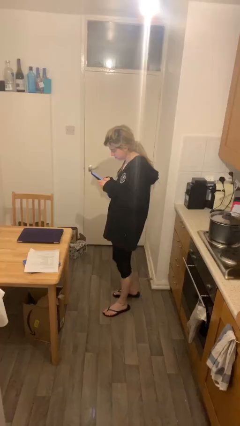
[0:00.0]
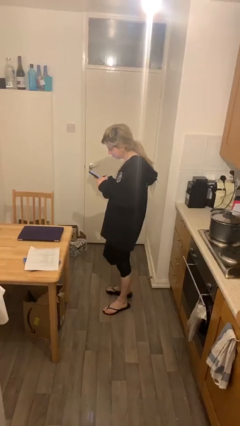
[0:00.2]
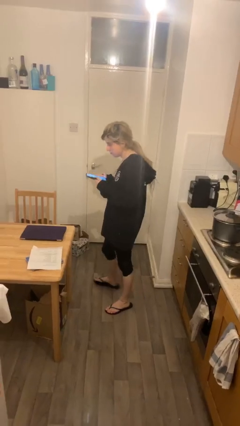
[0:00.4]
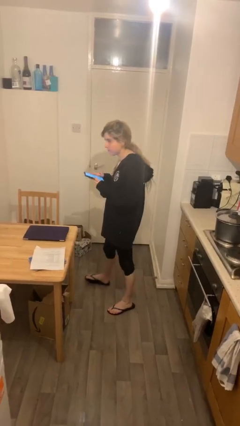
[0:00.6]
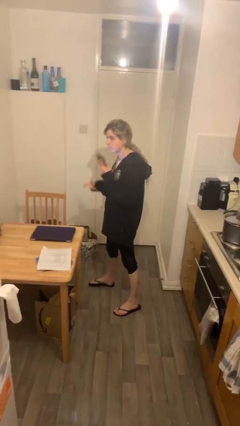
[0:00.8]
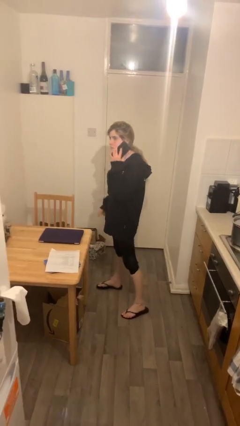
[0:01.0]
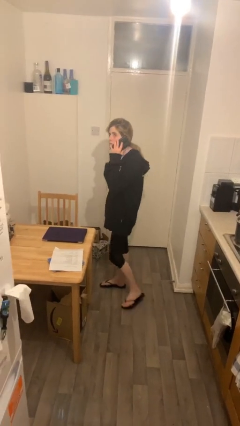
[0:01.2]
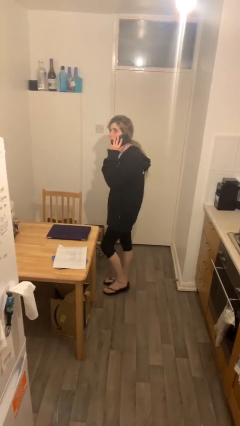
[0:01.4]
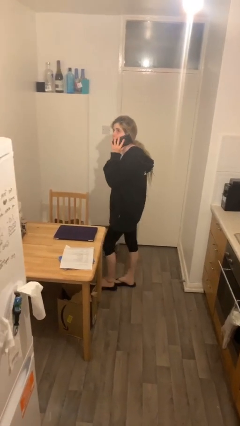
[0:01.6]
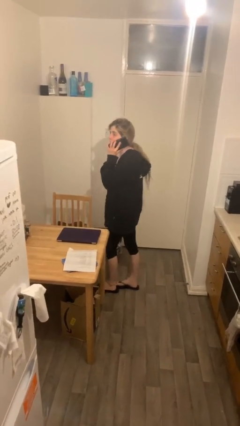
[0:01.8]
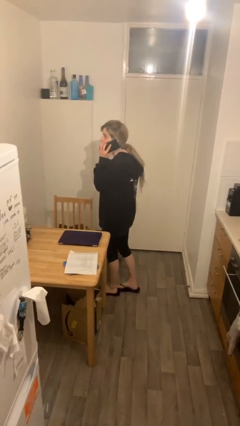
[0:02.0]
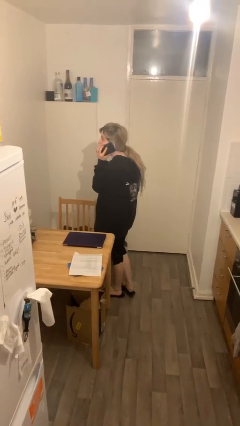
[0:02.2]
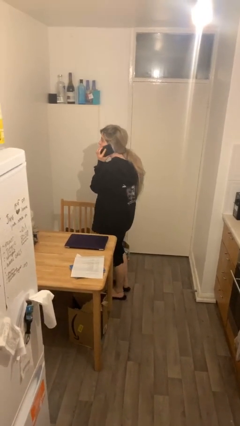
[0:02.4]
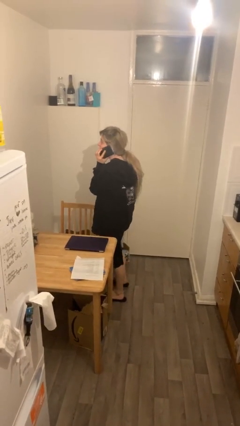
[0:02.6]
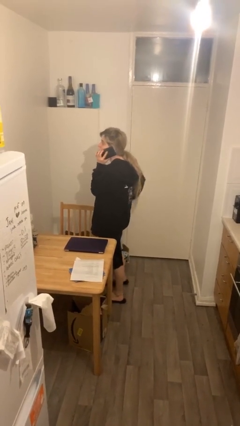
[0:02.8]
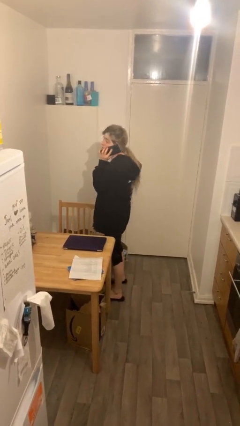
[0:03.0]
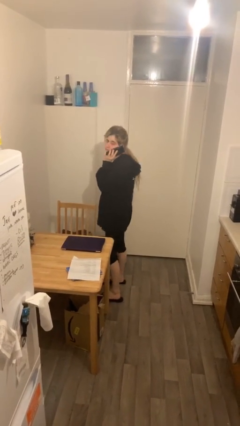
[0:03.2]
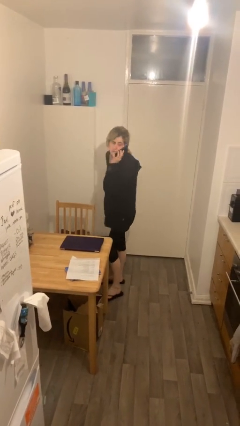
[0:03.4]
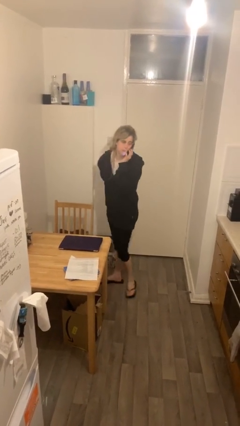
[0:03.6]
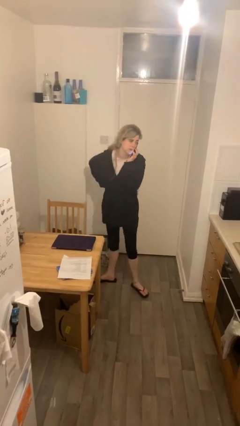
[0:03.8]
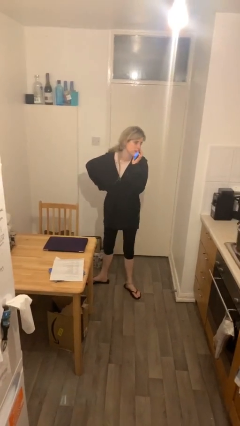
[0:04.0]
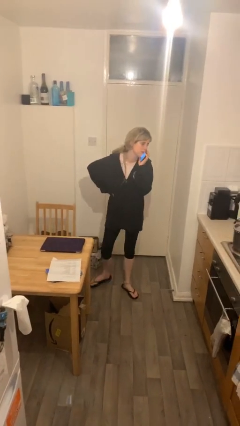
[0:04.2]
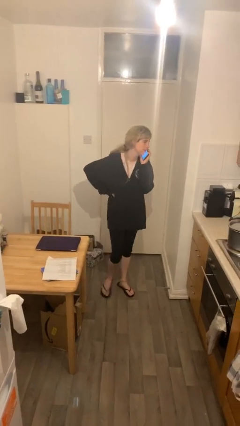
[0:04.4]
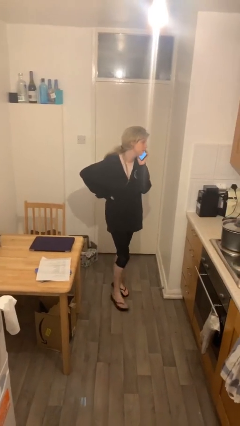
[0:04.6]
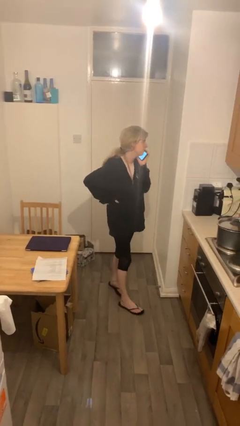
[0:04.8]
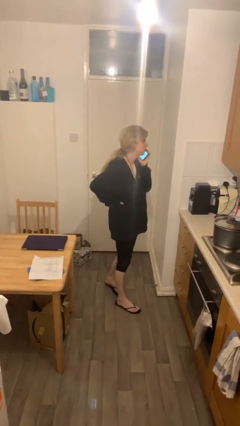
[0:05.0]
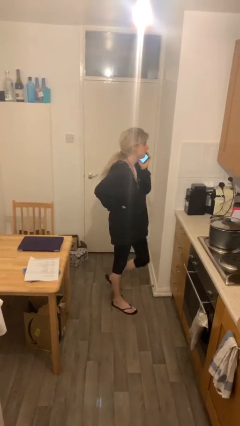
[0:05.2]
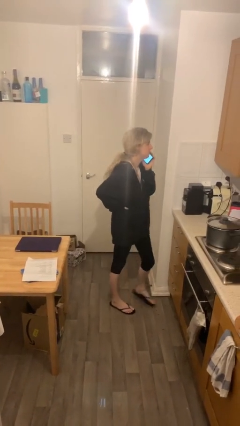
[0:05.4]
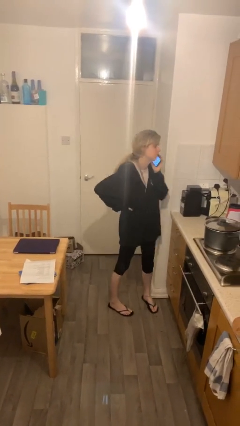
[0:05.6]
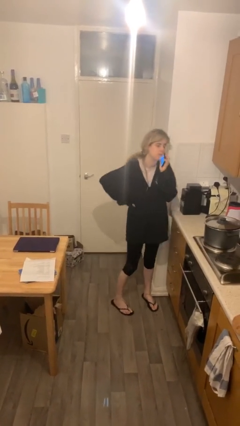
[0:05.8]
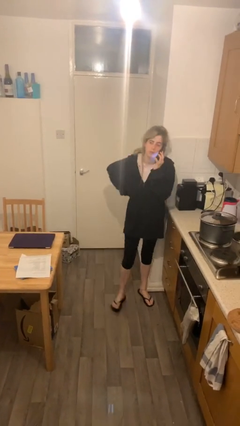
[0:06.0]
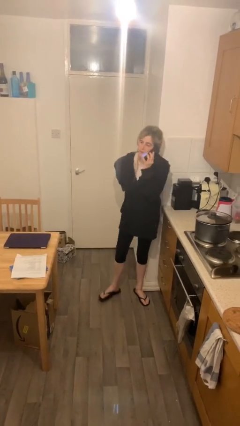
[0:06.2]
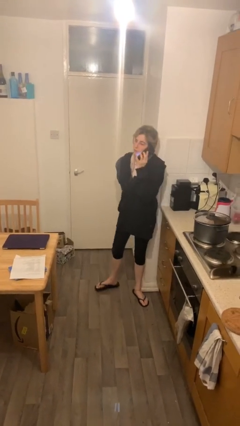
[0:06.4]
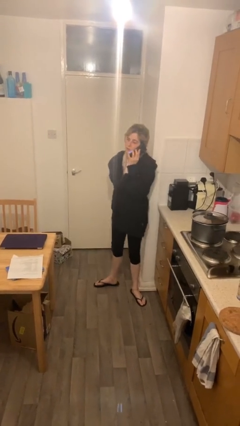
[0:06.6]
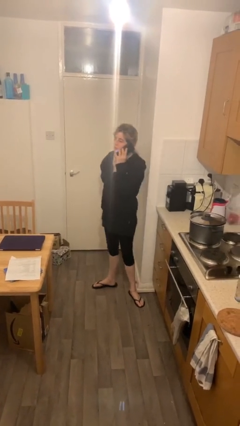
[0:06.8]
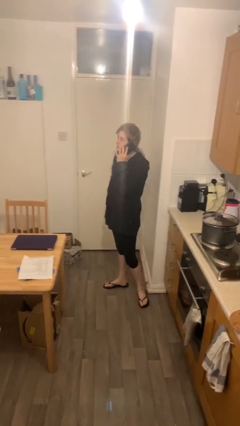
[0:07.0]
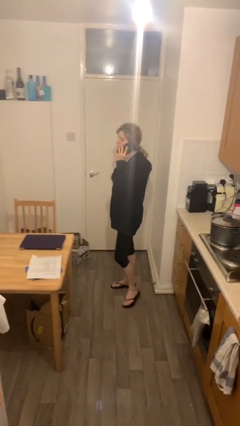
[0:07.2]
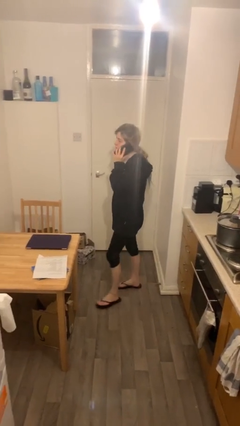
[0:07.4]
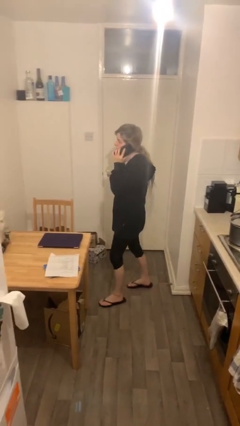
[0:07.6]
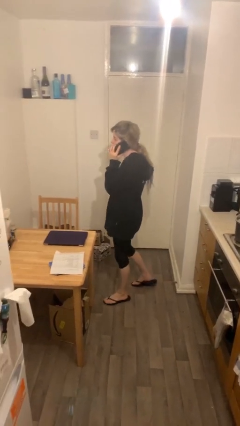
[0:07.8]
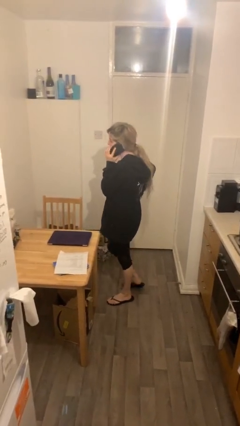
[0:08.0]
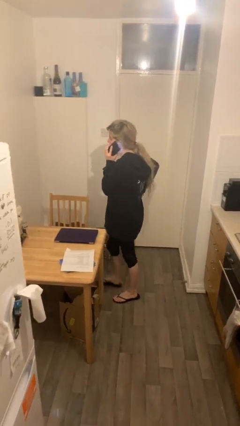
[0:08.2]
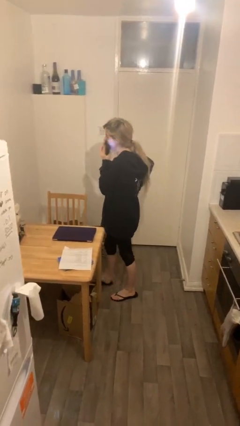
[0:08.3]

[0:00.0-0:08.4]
person talks on phone

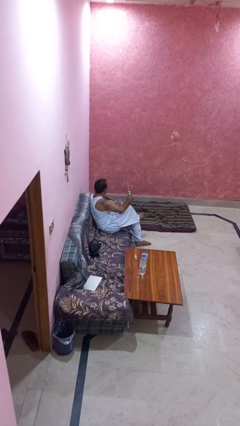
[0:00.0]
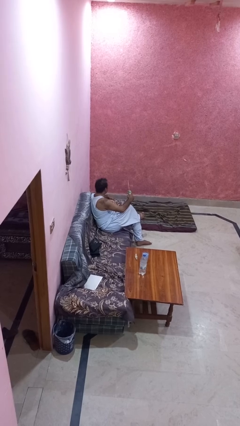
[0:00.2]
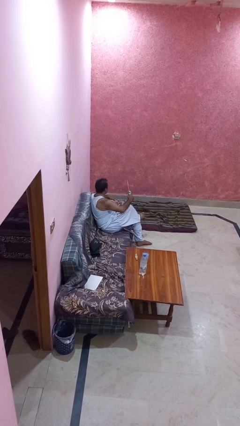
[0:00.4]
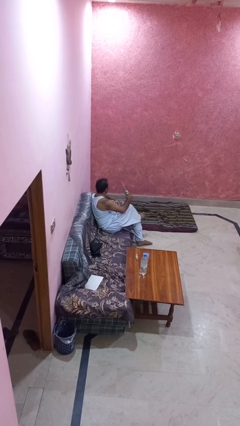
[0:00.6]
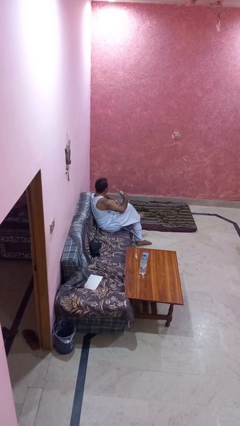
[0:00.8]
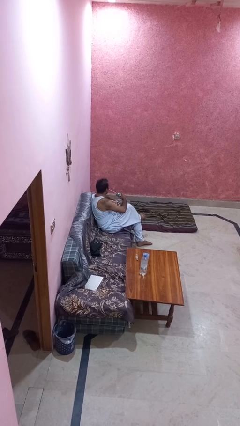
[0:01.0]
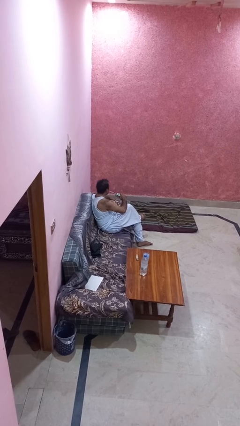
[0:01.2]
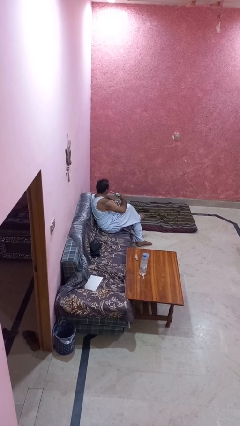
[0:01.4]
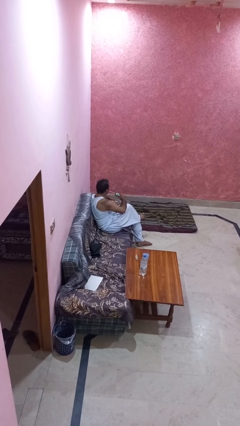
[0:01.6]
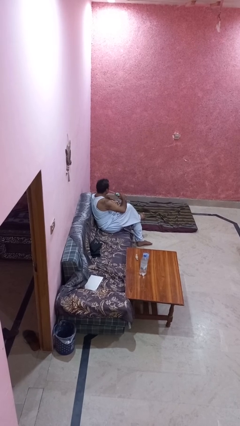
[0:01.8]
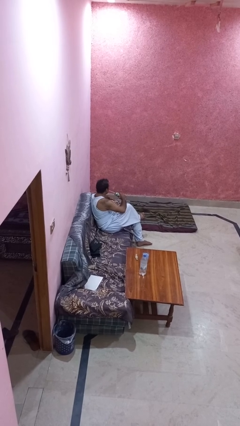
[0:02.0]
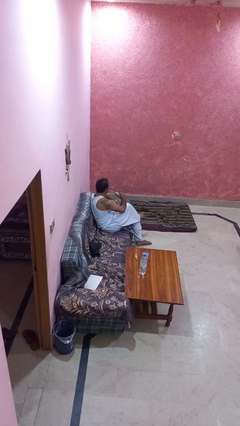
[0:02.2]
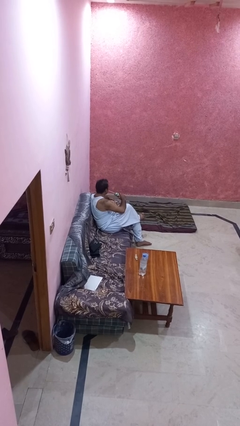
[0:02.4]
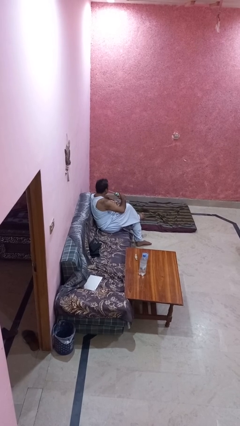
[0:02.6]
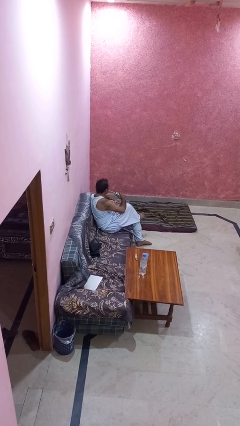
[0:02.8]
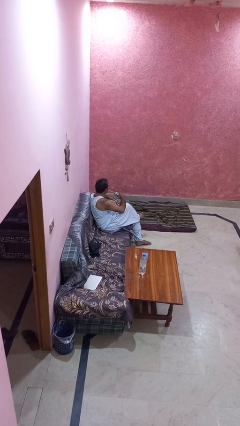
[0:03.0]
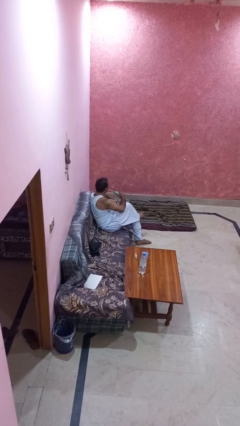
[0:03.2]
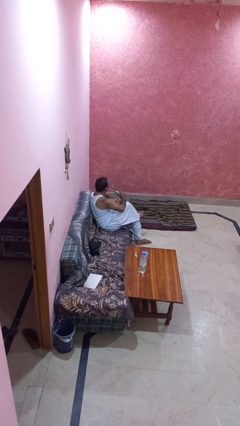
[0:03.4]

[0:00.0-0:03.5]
person drinks from straw

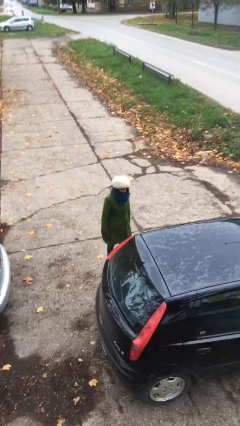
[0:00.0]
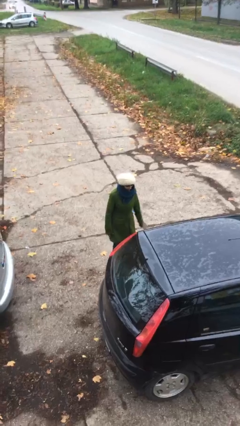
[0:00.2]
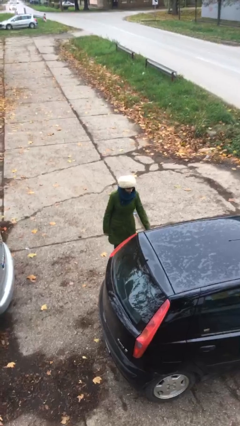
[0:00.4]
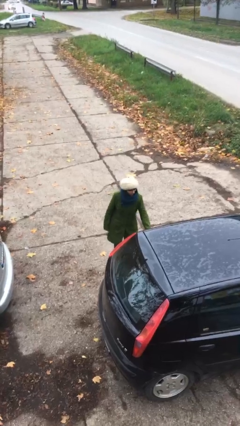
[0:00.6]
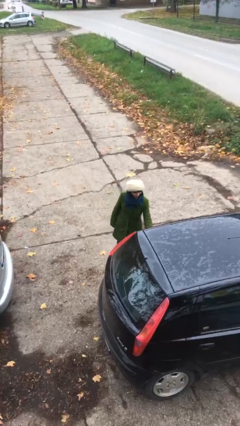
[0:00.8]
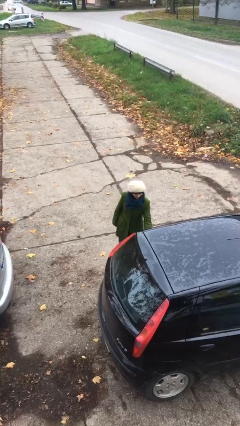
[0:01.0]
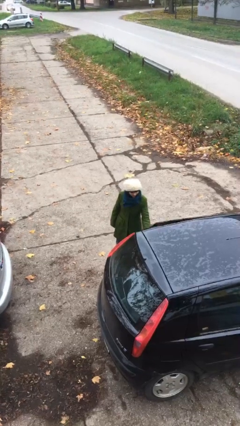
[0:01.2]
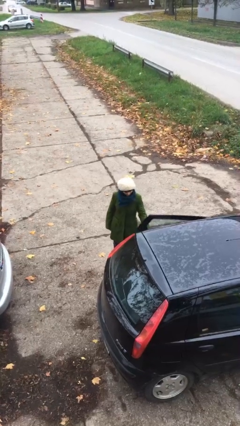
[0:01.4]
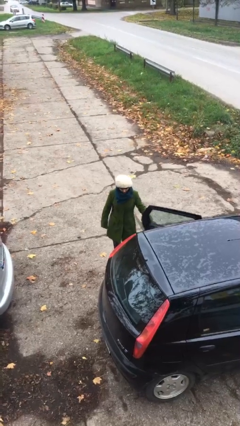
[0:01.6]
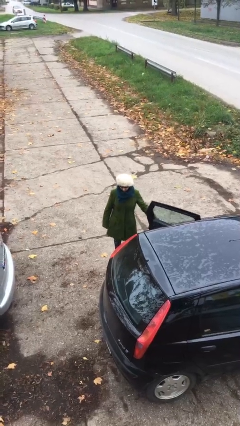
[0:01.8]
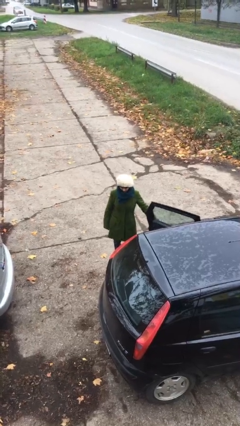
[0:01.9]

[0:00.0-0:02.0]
person opens car door

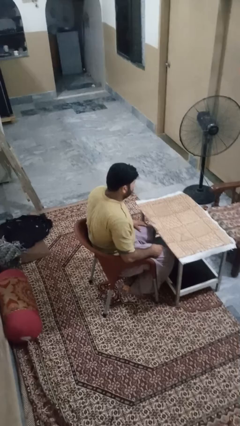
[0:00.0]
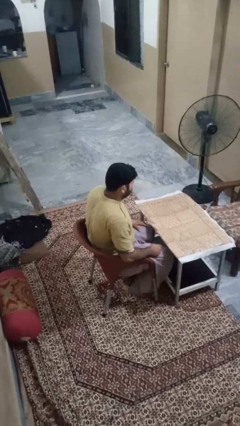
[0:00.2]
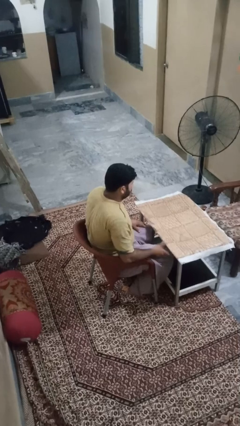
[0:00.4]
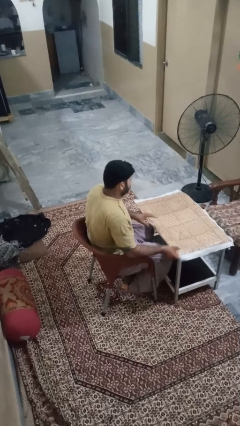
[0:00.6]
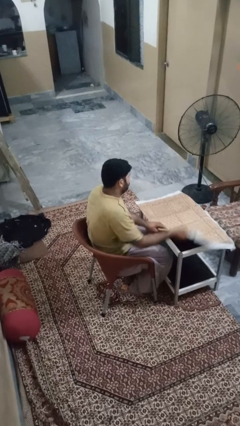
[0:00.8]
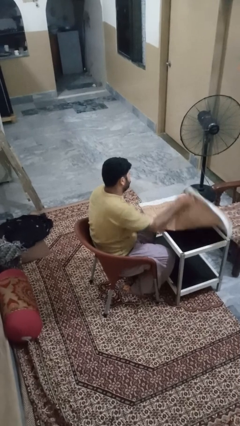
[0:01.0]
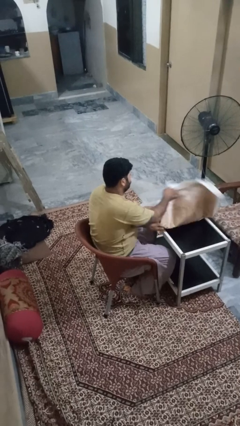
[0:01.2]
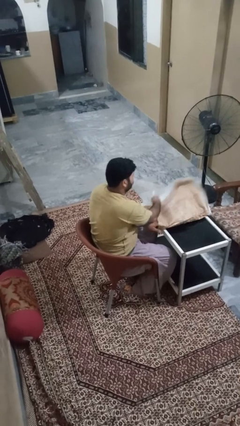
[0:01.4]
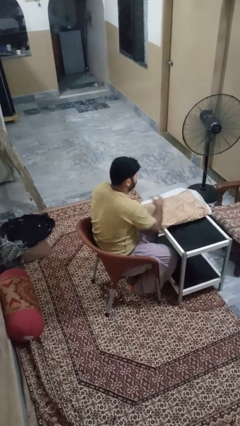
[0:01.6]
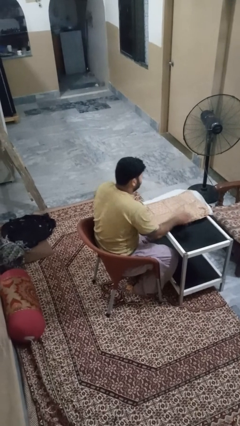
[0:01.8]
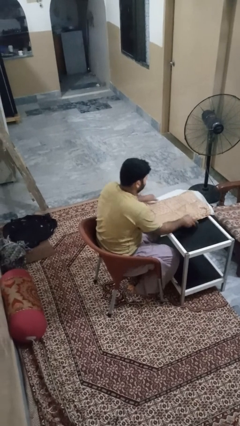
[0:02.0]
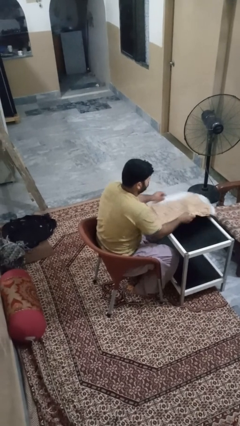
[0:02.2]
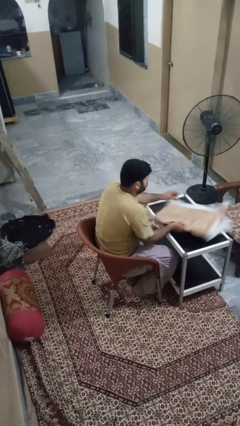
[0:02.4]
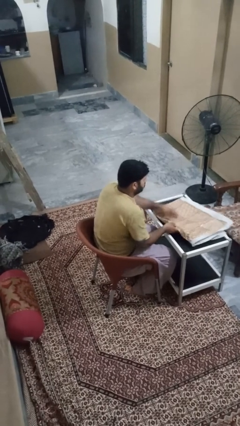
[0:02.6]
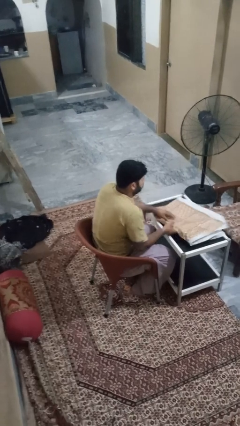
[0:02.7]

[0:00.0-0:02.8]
person folds tablecloth

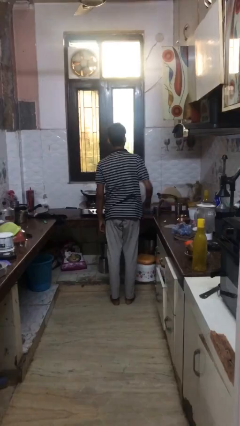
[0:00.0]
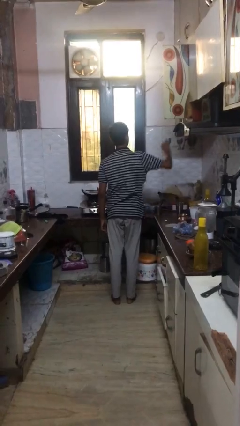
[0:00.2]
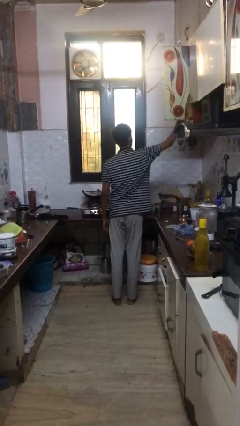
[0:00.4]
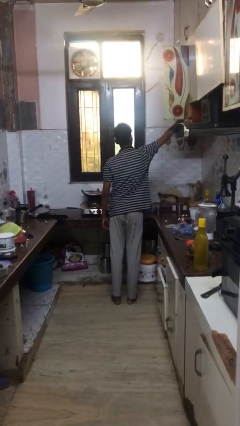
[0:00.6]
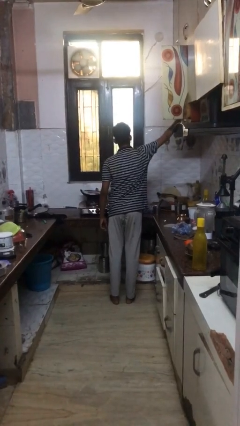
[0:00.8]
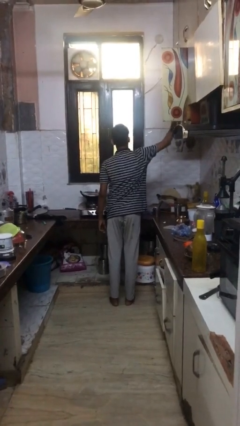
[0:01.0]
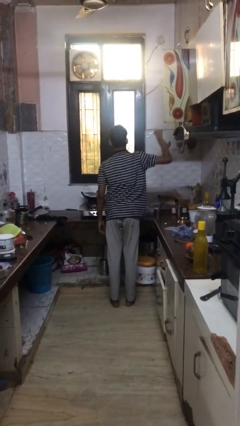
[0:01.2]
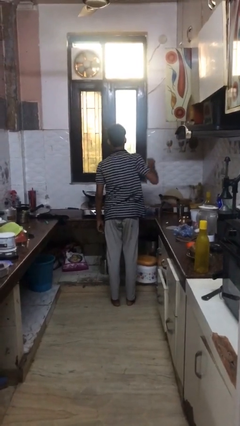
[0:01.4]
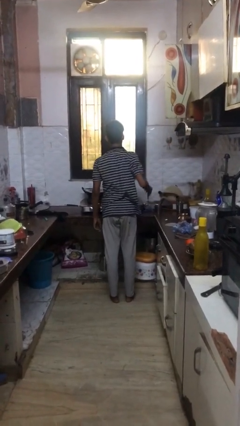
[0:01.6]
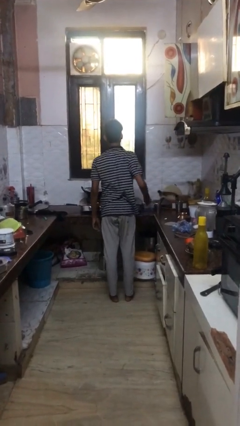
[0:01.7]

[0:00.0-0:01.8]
person puts object in cabinet
